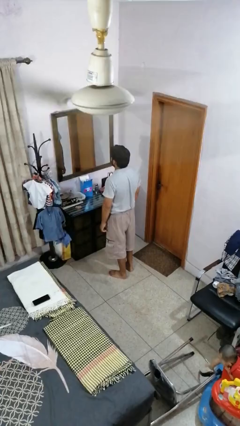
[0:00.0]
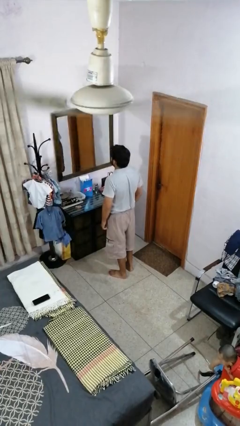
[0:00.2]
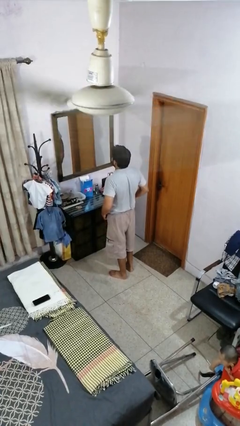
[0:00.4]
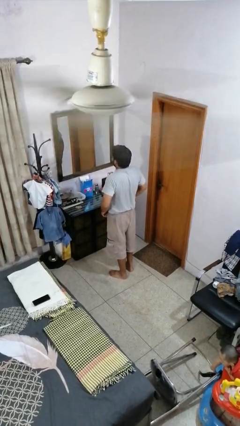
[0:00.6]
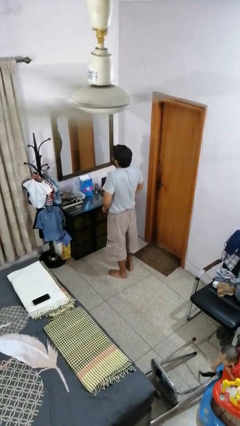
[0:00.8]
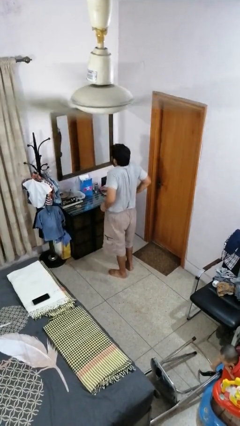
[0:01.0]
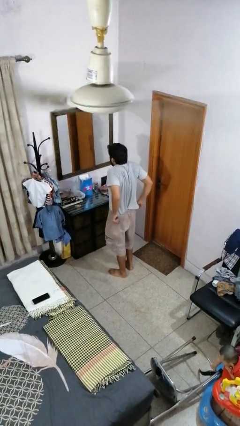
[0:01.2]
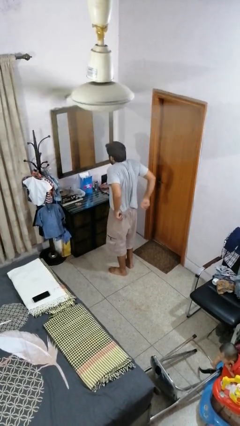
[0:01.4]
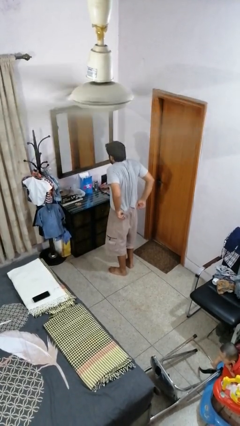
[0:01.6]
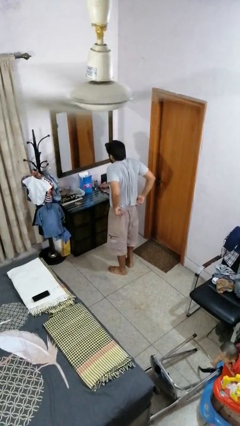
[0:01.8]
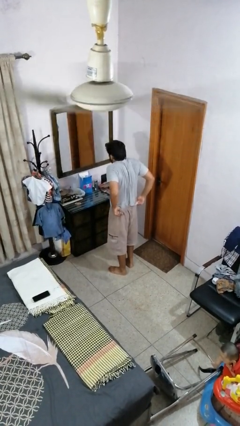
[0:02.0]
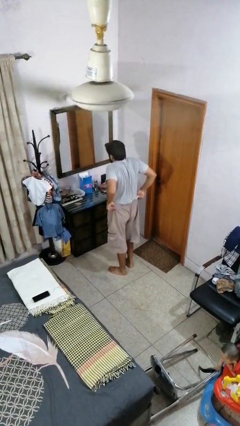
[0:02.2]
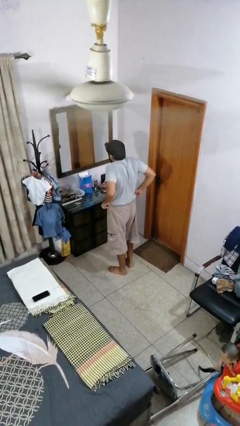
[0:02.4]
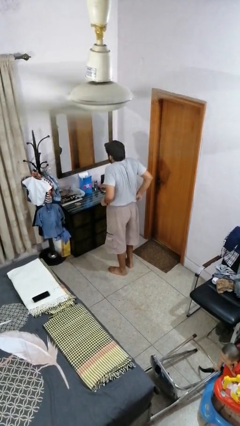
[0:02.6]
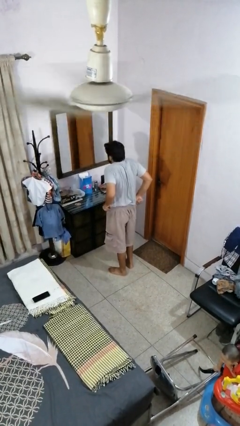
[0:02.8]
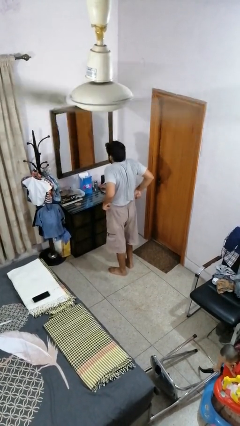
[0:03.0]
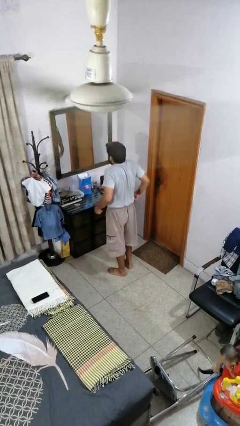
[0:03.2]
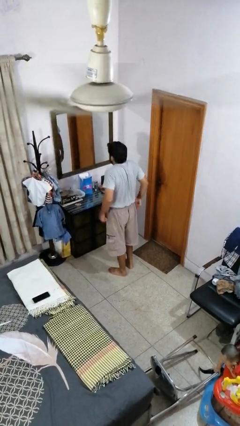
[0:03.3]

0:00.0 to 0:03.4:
person hikes up pants

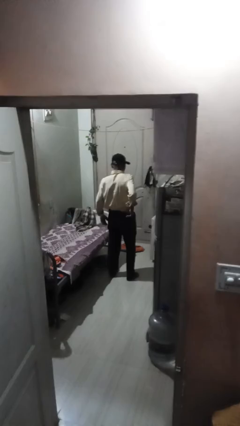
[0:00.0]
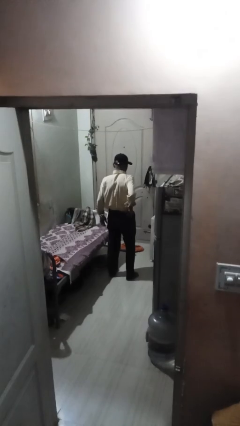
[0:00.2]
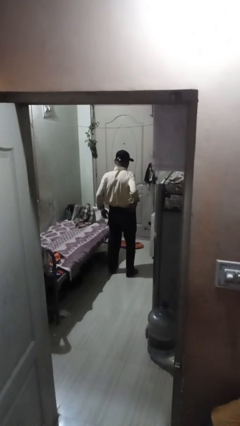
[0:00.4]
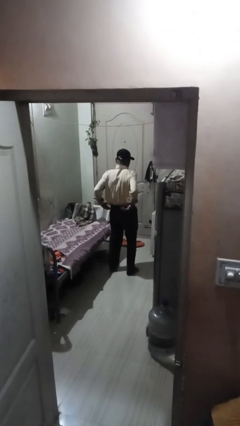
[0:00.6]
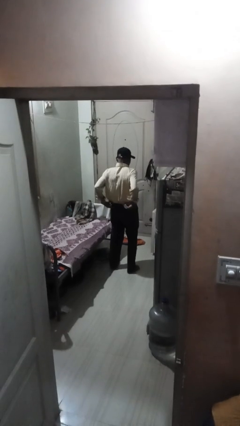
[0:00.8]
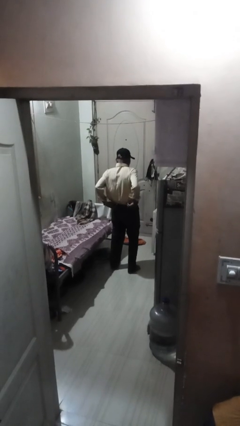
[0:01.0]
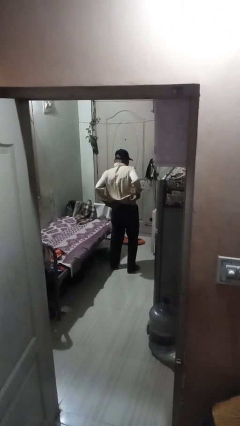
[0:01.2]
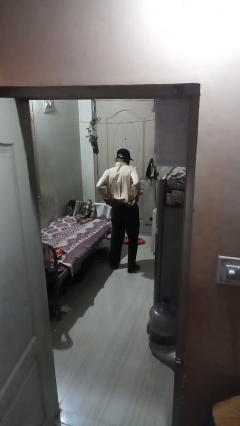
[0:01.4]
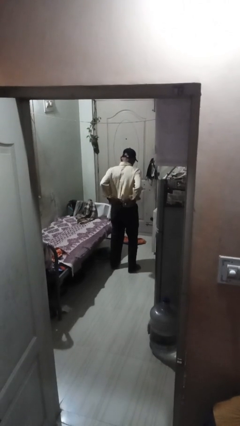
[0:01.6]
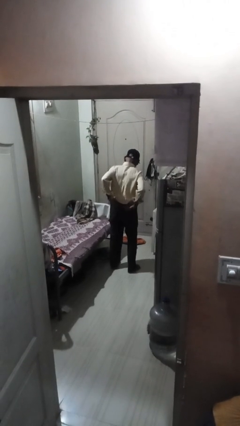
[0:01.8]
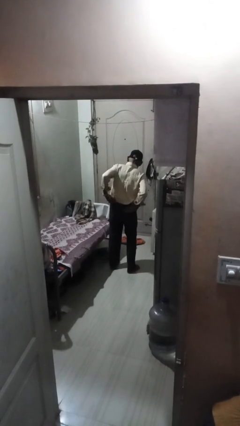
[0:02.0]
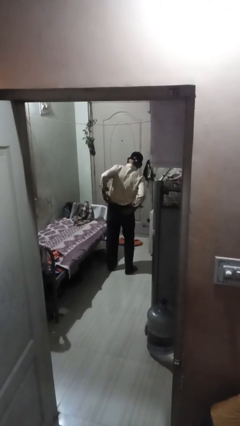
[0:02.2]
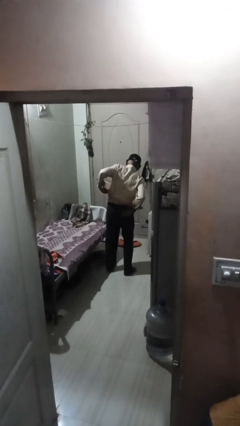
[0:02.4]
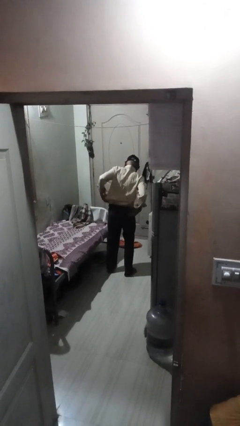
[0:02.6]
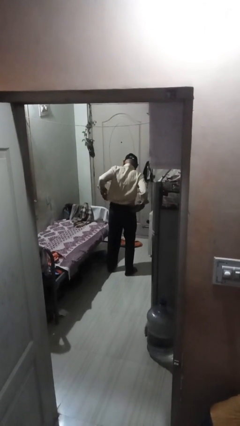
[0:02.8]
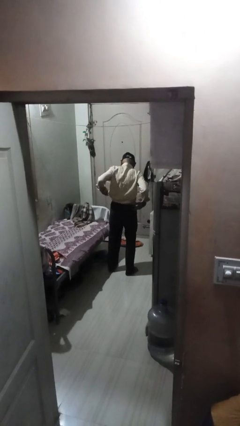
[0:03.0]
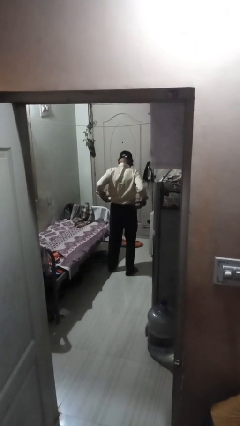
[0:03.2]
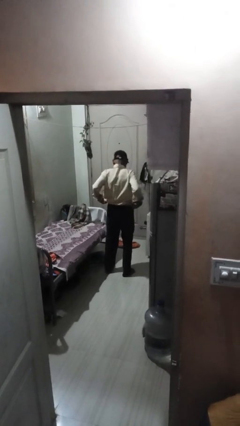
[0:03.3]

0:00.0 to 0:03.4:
person untucks shirt

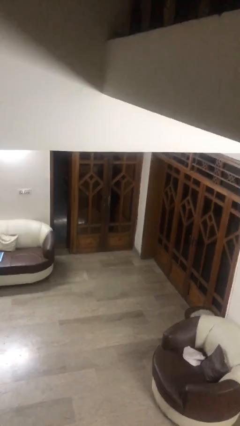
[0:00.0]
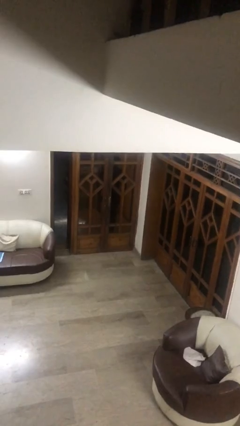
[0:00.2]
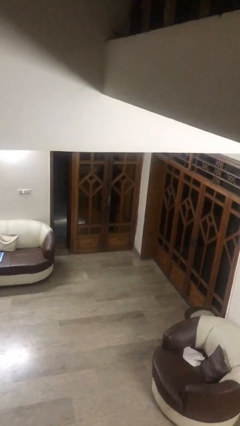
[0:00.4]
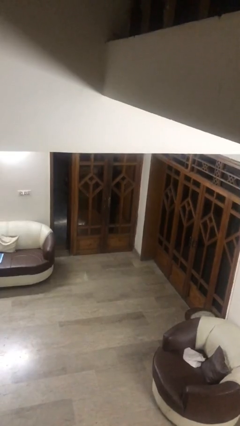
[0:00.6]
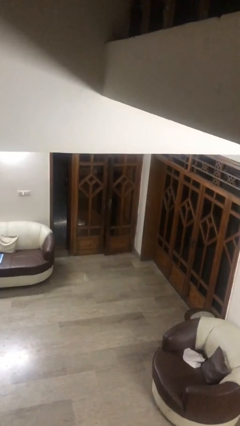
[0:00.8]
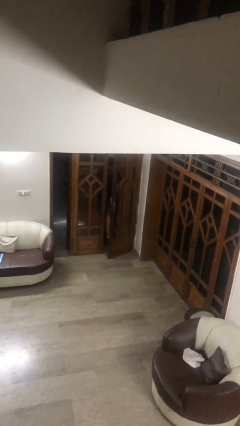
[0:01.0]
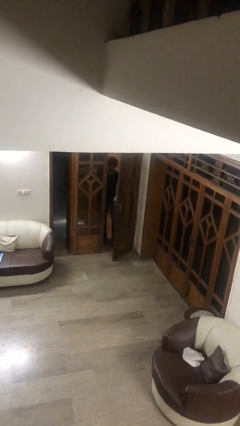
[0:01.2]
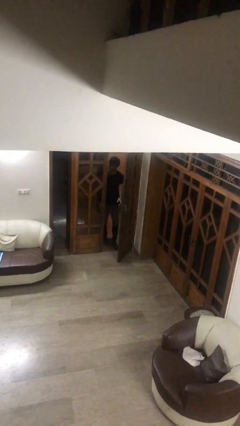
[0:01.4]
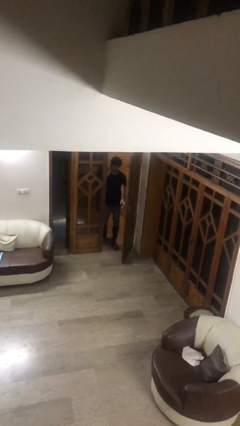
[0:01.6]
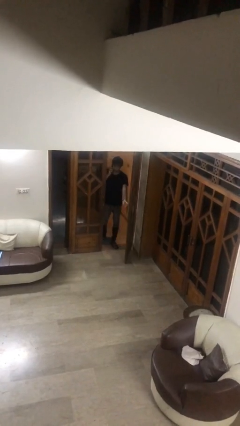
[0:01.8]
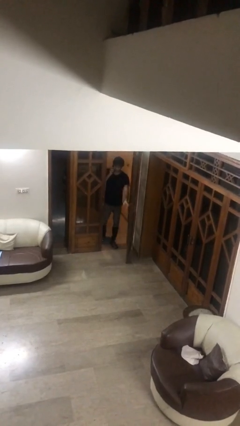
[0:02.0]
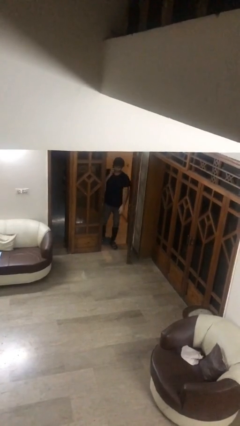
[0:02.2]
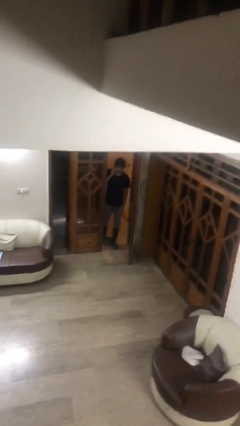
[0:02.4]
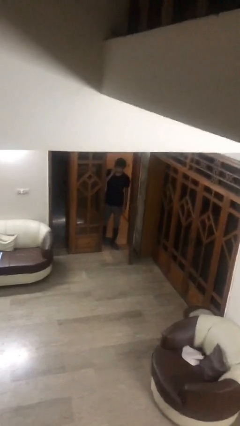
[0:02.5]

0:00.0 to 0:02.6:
person opens facility door

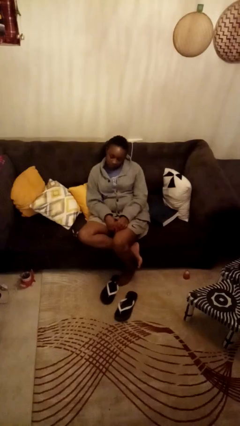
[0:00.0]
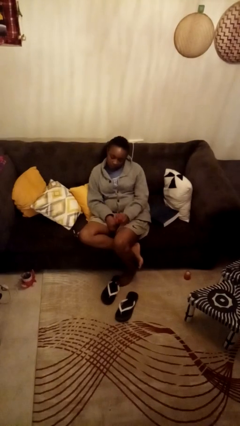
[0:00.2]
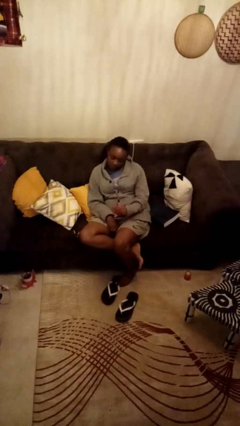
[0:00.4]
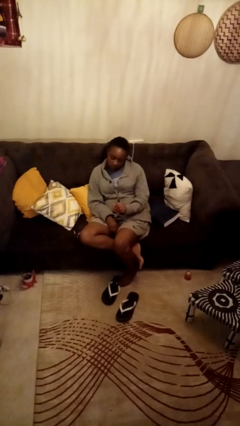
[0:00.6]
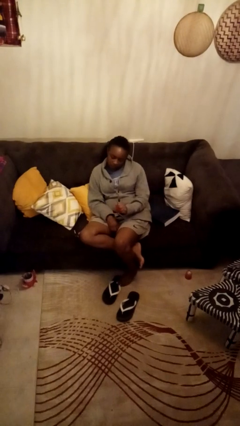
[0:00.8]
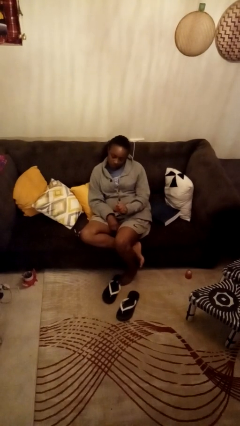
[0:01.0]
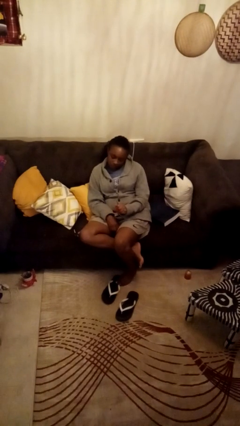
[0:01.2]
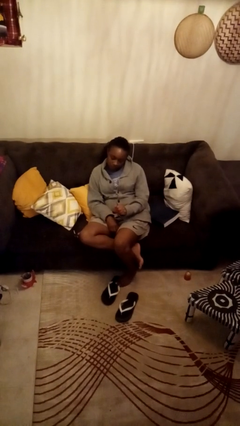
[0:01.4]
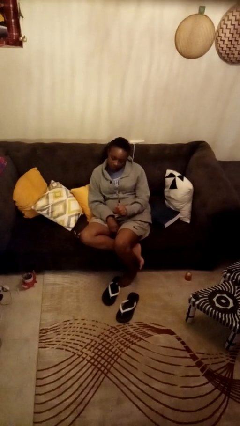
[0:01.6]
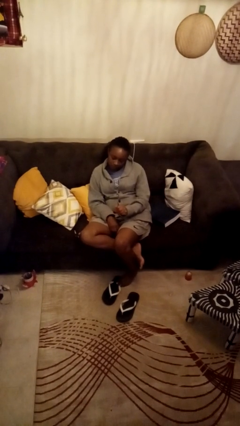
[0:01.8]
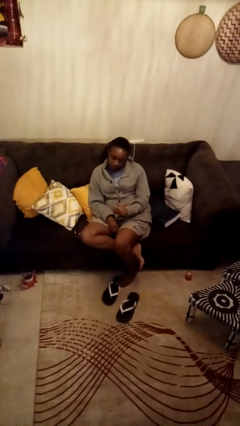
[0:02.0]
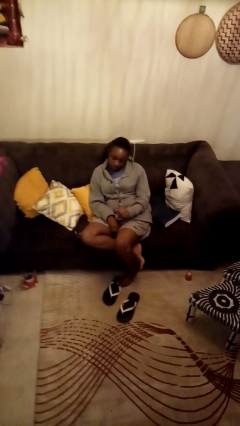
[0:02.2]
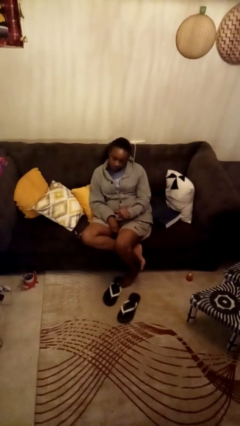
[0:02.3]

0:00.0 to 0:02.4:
person squeezes object

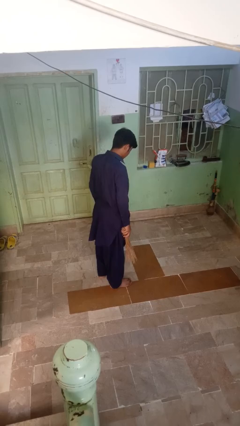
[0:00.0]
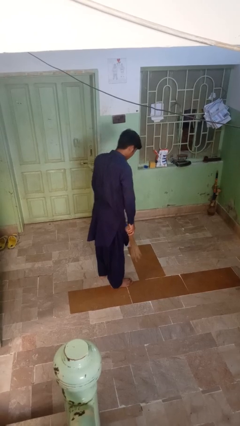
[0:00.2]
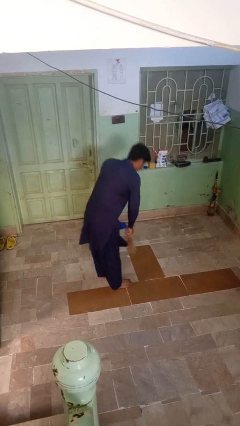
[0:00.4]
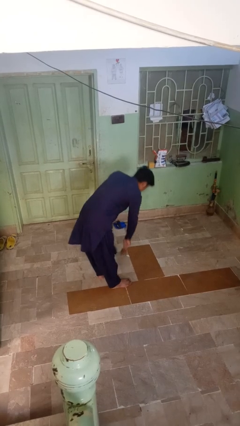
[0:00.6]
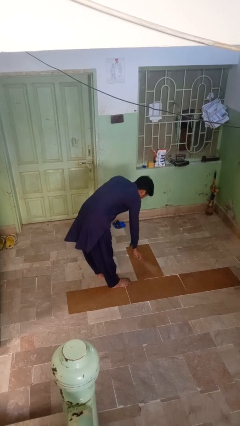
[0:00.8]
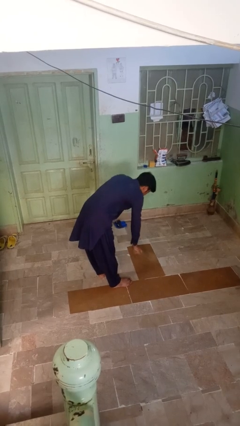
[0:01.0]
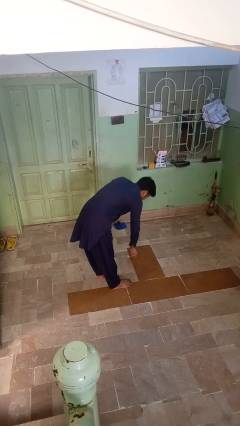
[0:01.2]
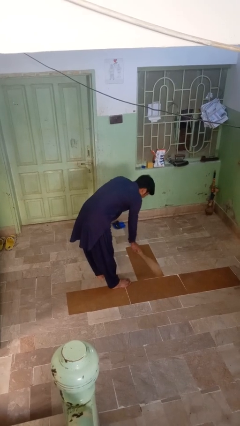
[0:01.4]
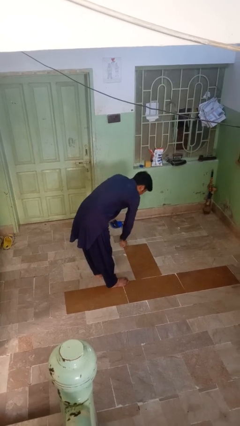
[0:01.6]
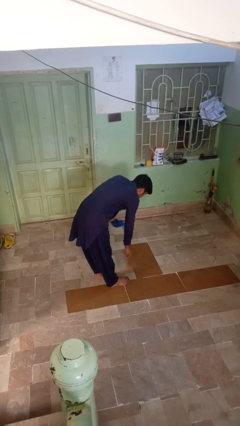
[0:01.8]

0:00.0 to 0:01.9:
person sweeps floor

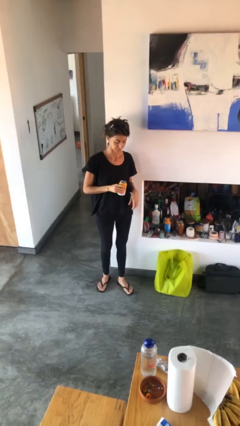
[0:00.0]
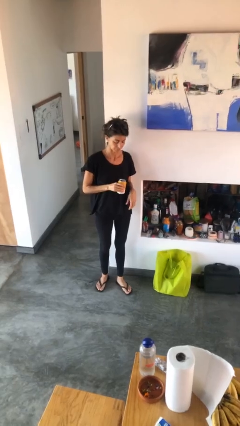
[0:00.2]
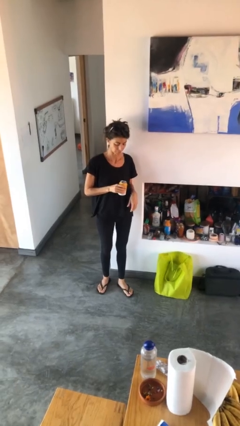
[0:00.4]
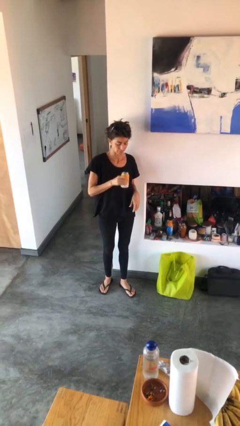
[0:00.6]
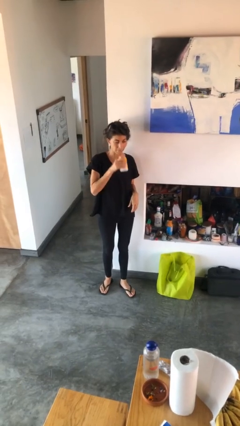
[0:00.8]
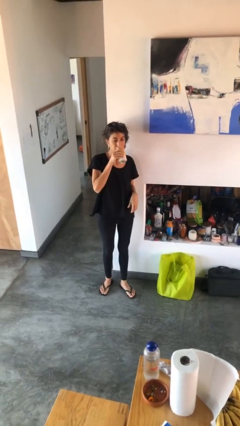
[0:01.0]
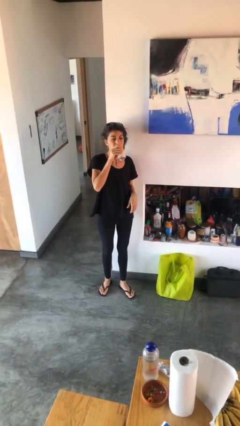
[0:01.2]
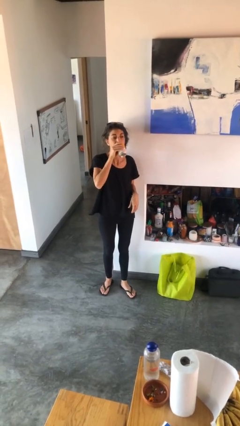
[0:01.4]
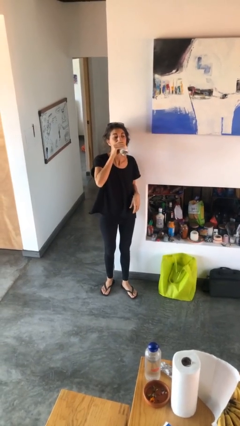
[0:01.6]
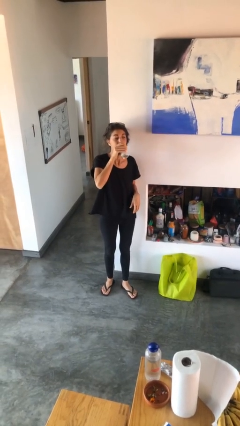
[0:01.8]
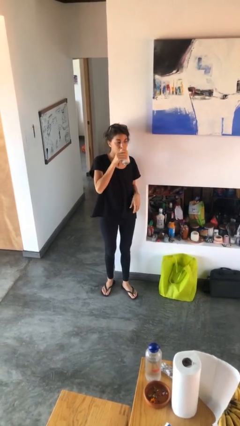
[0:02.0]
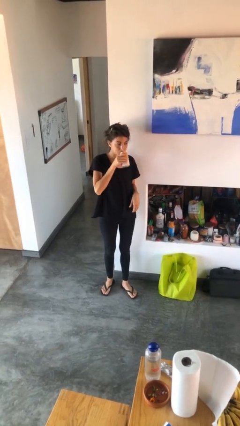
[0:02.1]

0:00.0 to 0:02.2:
person drinks from beverage can

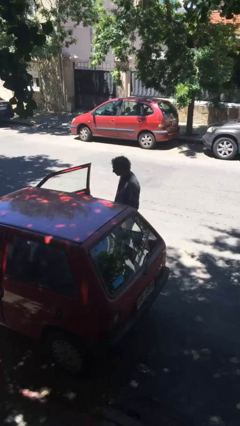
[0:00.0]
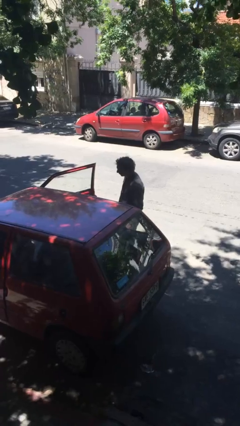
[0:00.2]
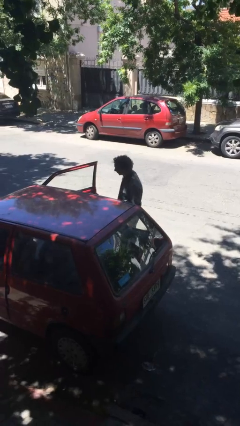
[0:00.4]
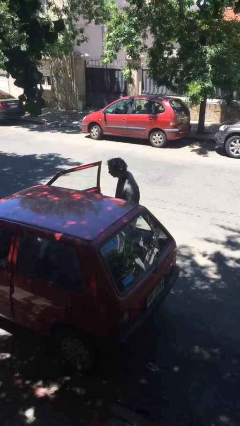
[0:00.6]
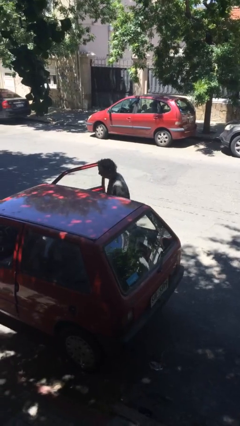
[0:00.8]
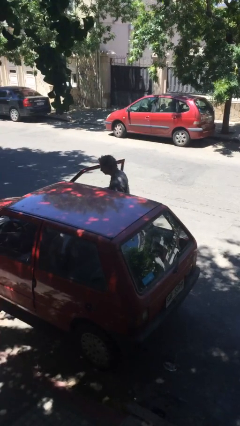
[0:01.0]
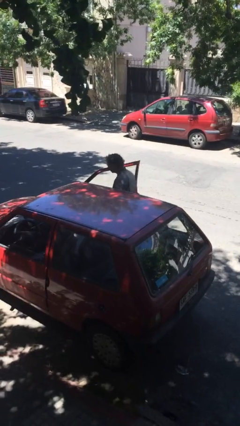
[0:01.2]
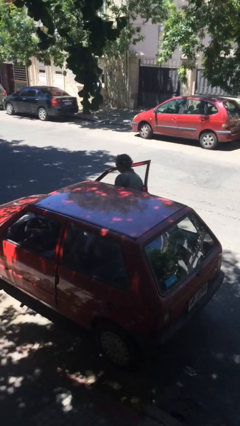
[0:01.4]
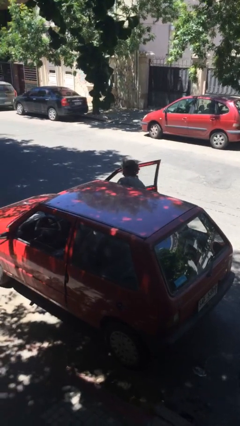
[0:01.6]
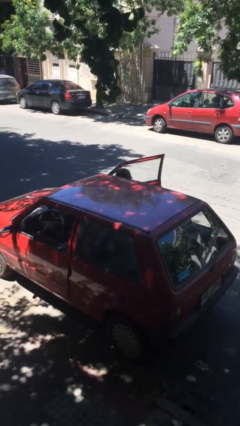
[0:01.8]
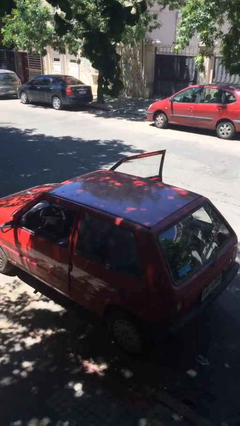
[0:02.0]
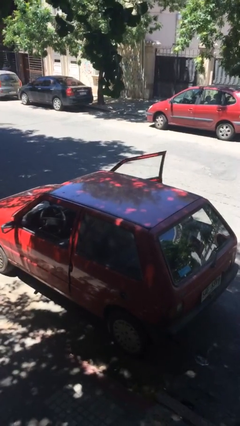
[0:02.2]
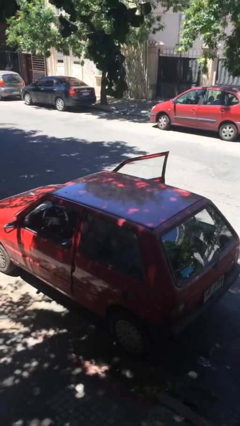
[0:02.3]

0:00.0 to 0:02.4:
person enters car
